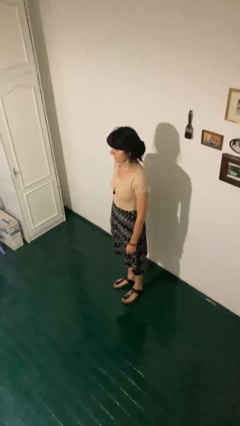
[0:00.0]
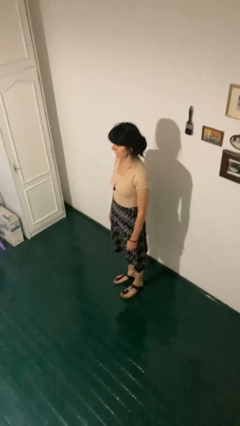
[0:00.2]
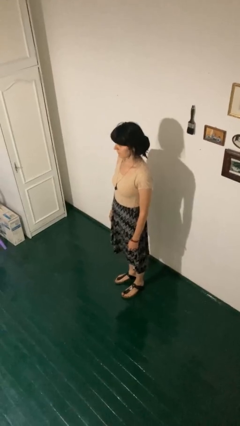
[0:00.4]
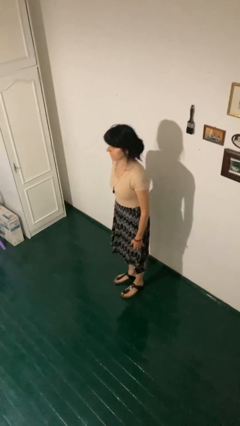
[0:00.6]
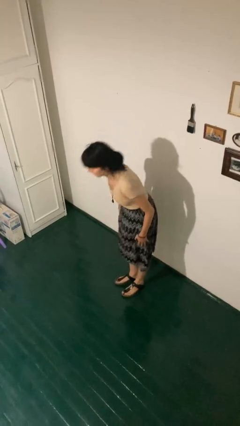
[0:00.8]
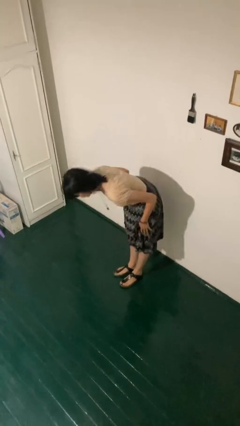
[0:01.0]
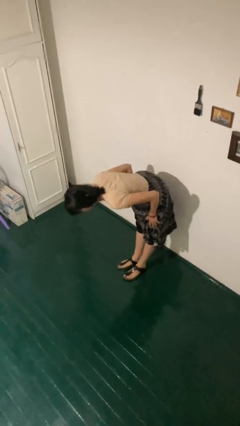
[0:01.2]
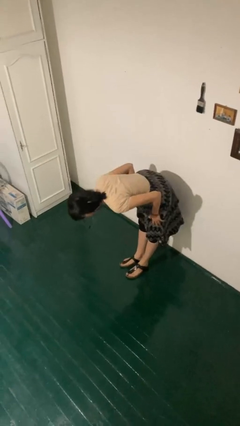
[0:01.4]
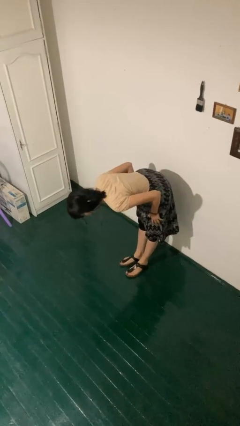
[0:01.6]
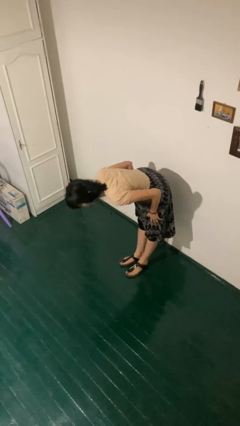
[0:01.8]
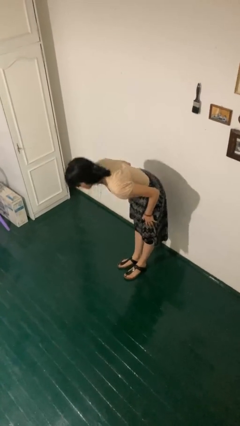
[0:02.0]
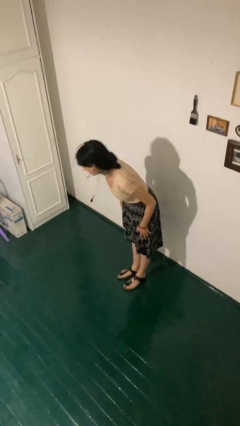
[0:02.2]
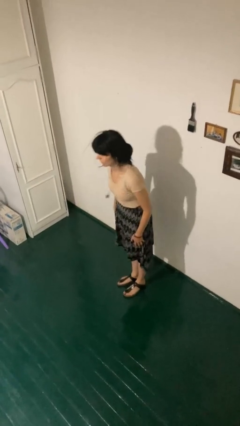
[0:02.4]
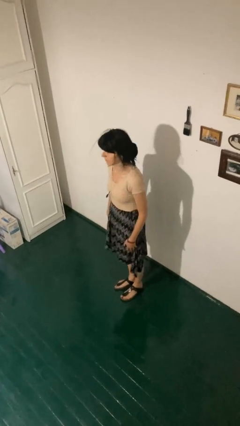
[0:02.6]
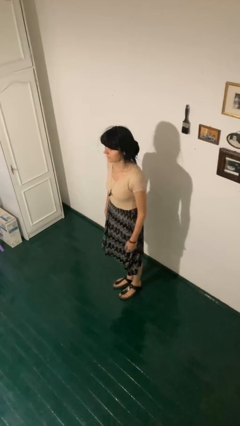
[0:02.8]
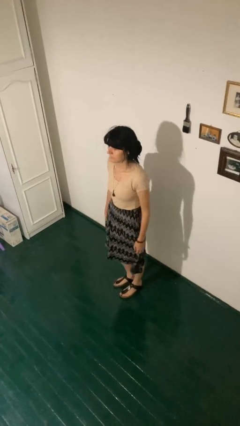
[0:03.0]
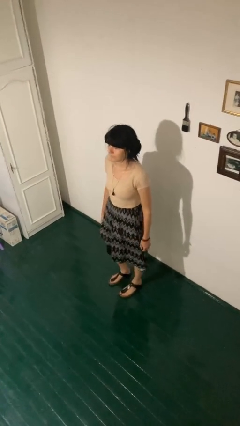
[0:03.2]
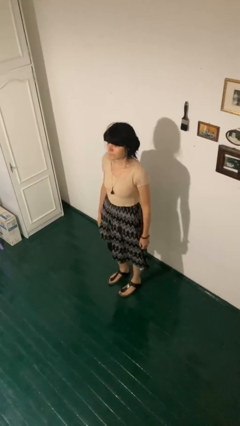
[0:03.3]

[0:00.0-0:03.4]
person bows

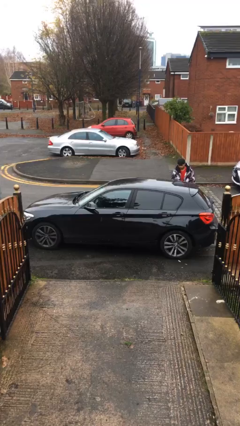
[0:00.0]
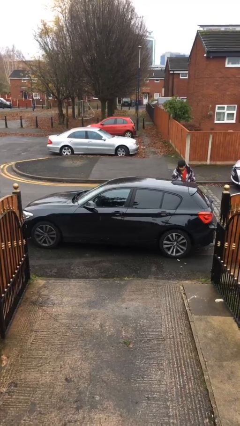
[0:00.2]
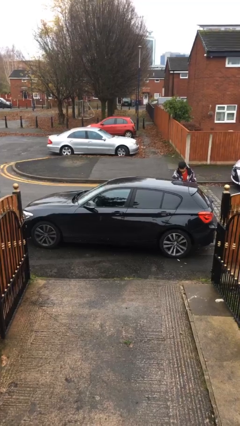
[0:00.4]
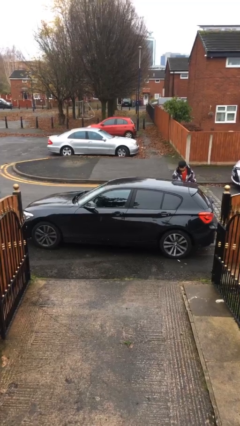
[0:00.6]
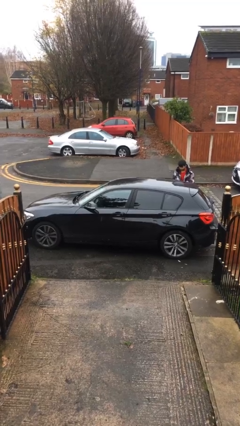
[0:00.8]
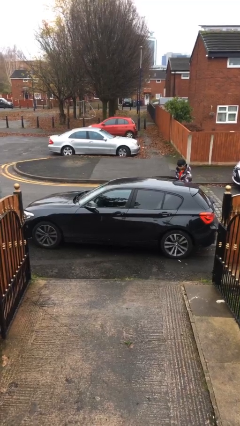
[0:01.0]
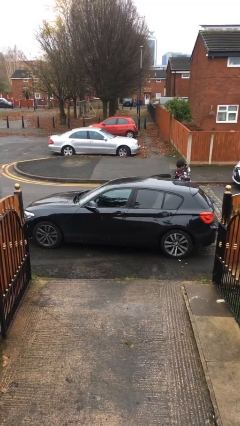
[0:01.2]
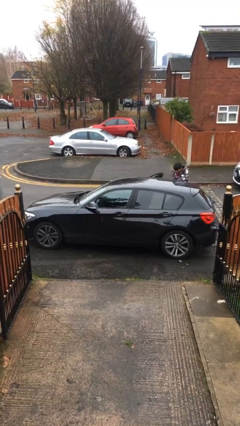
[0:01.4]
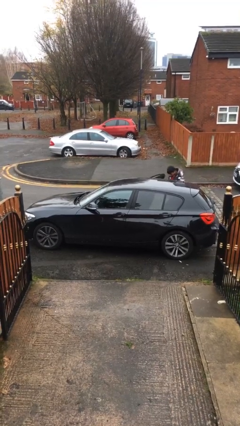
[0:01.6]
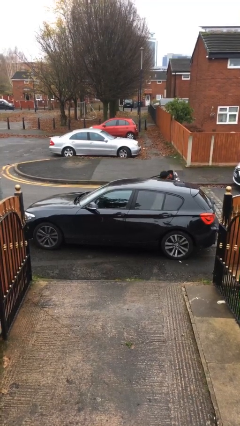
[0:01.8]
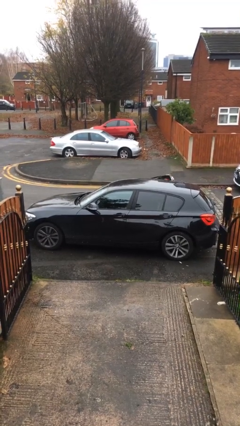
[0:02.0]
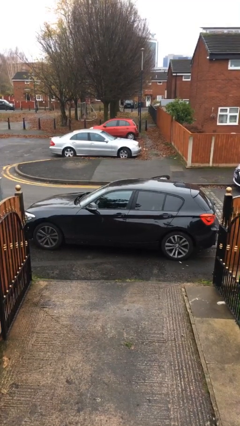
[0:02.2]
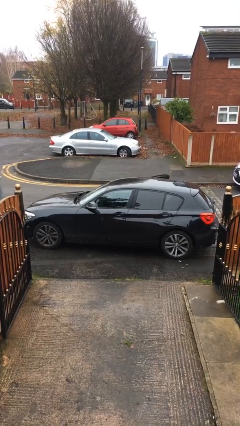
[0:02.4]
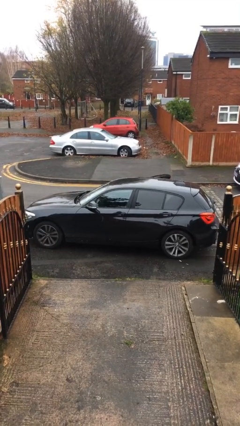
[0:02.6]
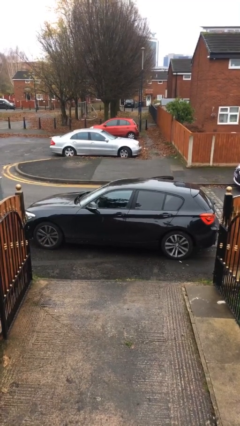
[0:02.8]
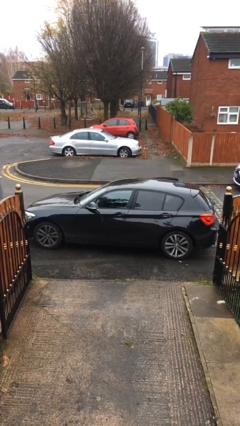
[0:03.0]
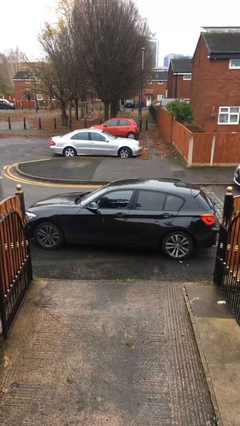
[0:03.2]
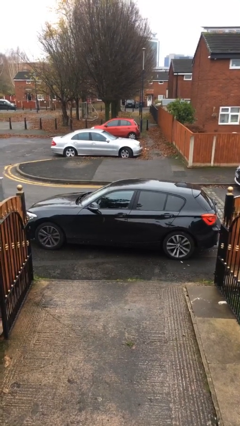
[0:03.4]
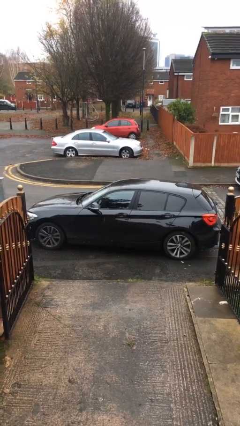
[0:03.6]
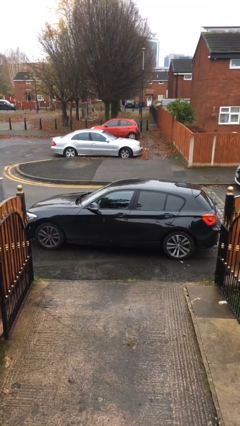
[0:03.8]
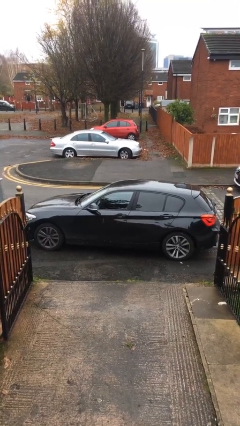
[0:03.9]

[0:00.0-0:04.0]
car picks up person

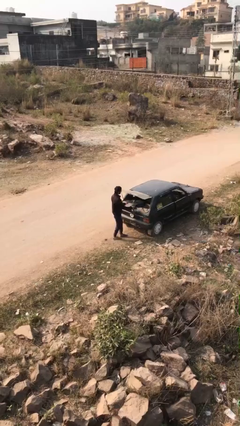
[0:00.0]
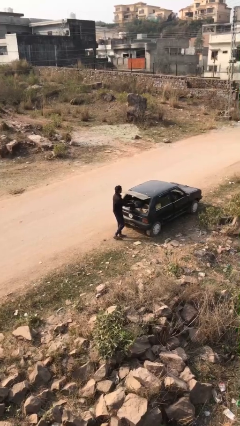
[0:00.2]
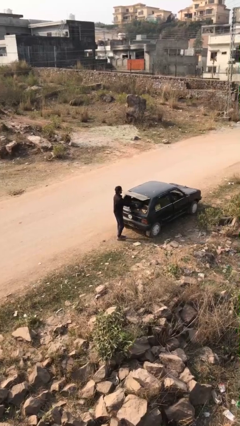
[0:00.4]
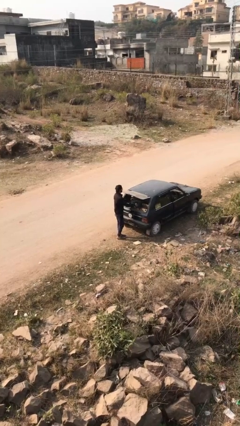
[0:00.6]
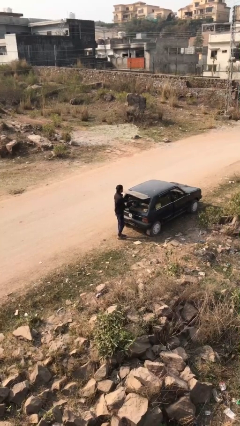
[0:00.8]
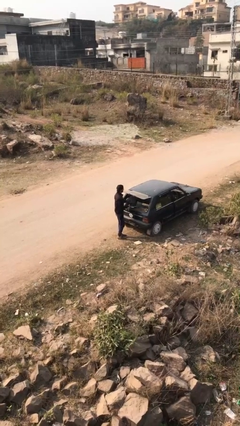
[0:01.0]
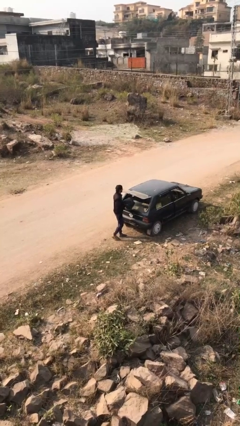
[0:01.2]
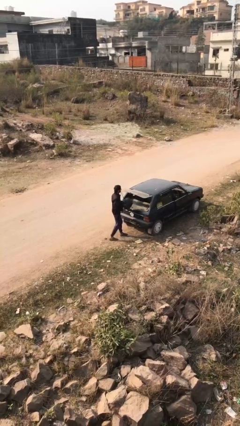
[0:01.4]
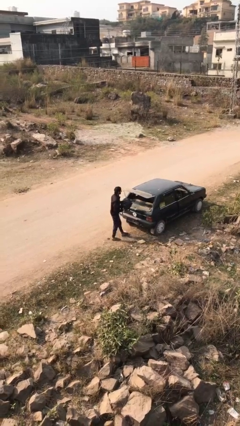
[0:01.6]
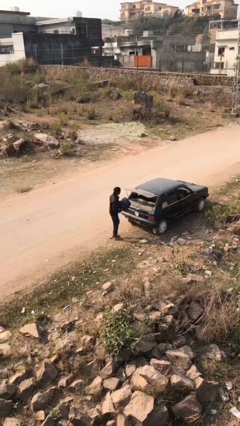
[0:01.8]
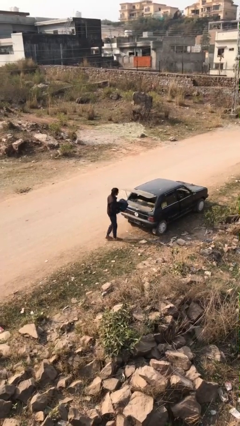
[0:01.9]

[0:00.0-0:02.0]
person unloads car

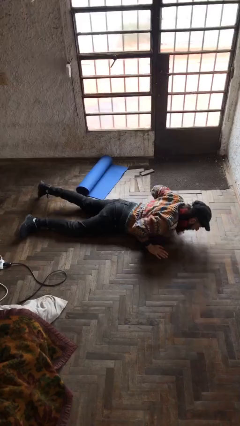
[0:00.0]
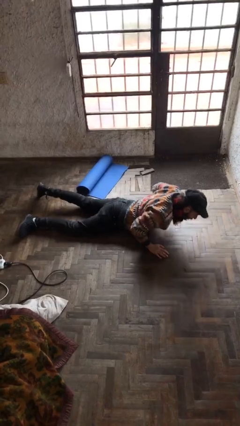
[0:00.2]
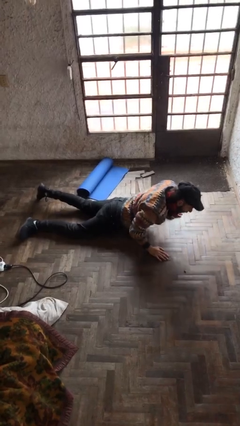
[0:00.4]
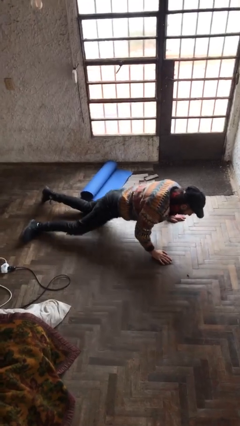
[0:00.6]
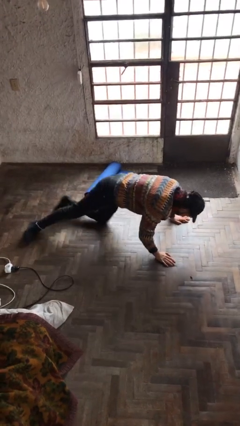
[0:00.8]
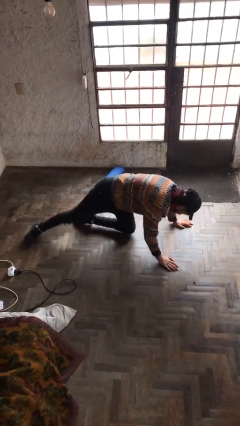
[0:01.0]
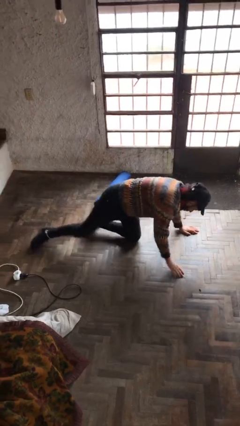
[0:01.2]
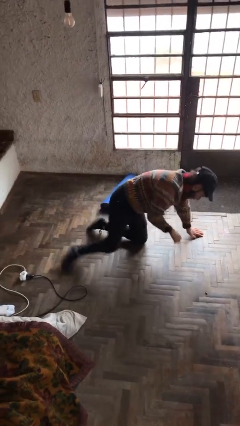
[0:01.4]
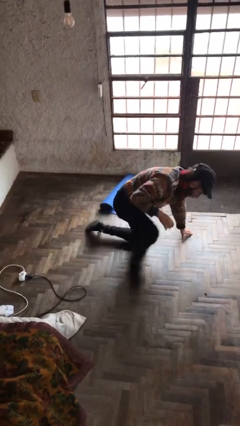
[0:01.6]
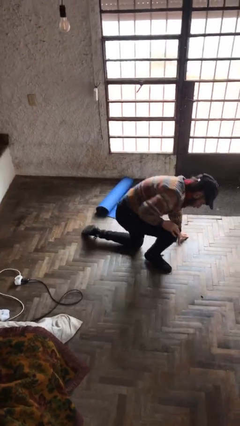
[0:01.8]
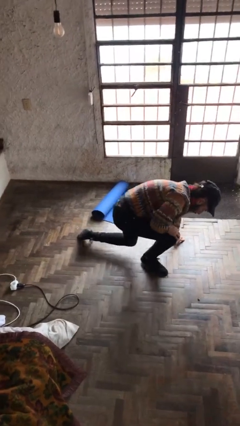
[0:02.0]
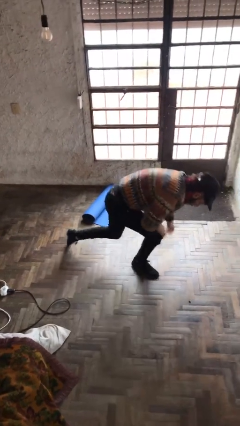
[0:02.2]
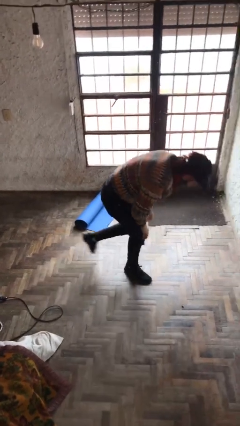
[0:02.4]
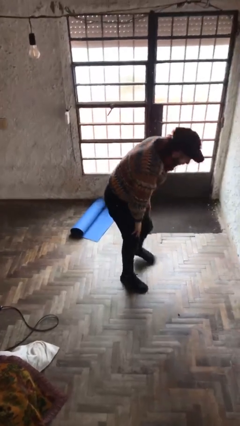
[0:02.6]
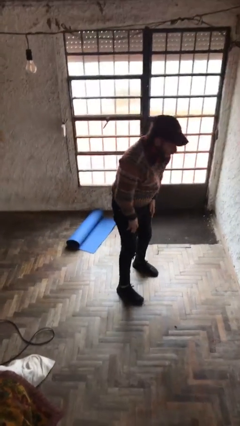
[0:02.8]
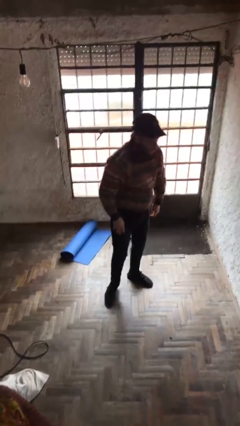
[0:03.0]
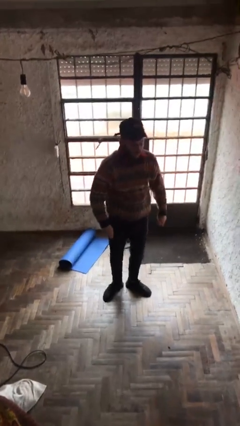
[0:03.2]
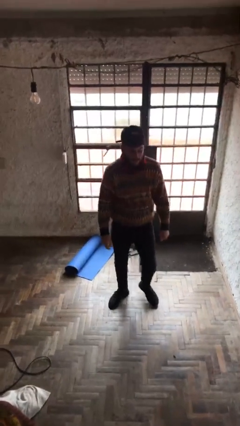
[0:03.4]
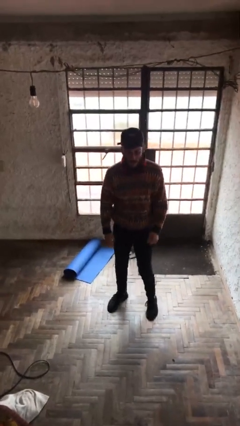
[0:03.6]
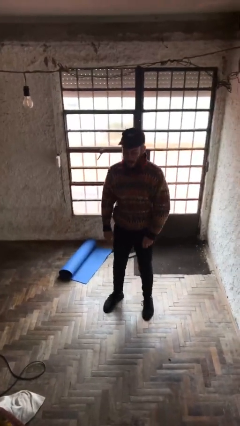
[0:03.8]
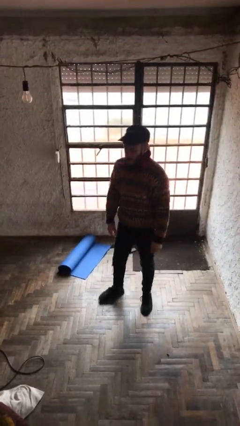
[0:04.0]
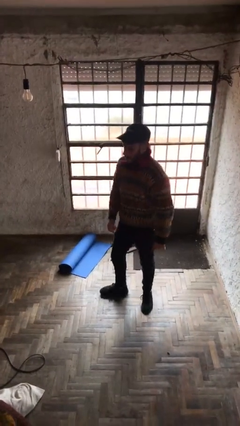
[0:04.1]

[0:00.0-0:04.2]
person stands up from floor

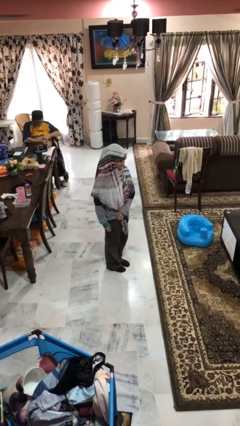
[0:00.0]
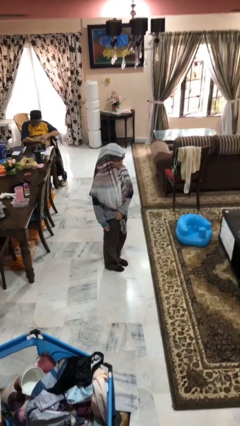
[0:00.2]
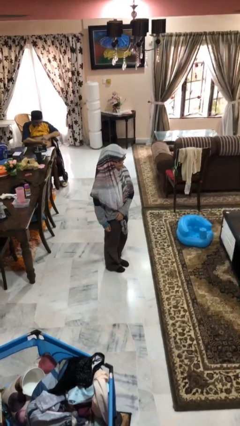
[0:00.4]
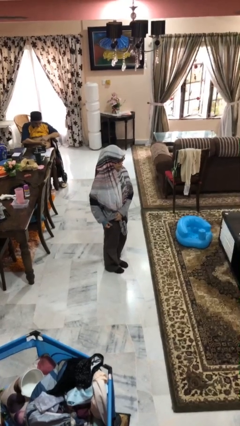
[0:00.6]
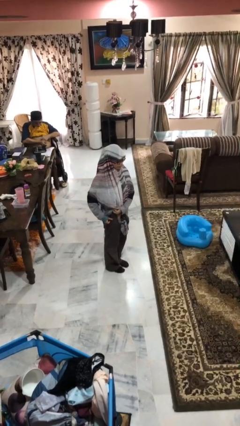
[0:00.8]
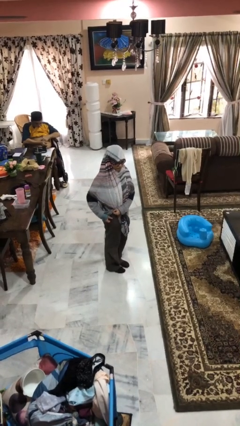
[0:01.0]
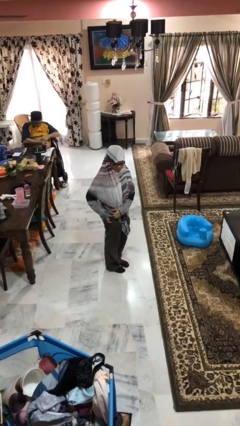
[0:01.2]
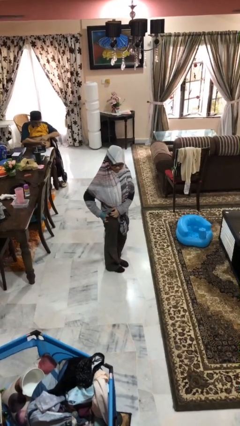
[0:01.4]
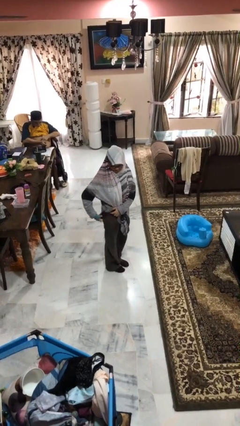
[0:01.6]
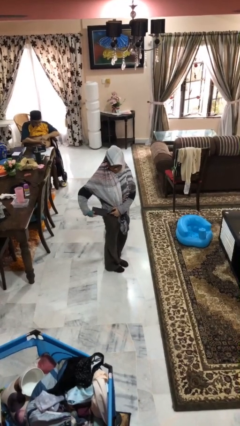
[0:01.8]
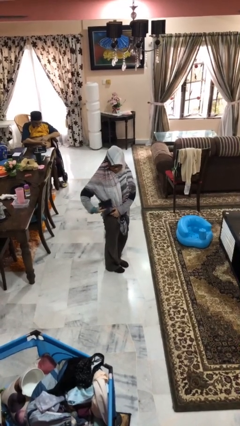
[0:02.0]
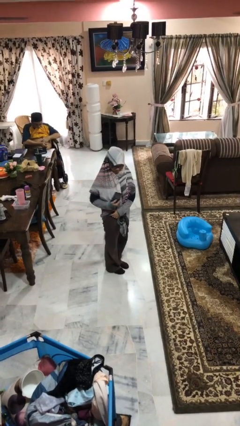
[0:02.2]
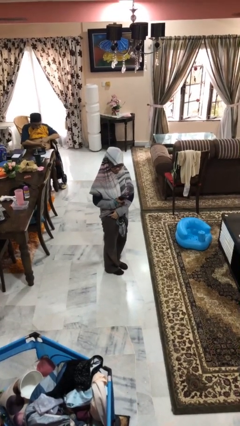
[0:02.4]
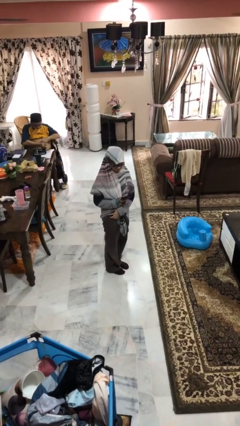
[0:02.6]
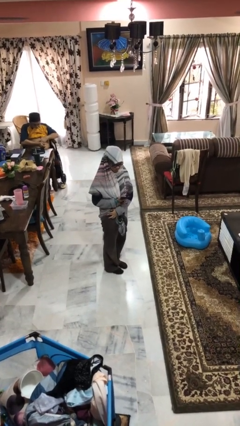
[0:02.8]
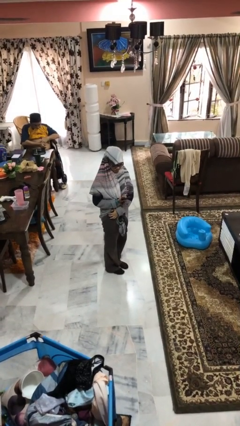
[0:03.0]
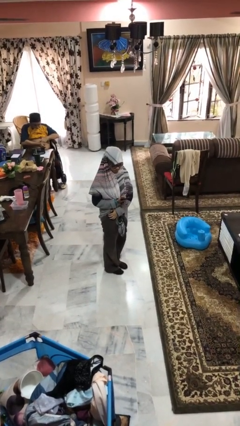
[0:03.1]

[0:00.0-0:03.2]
person takes phone from pocket

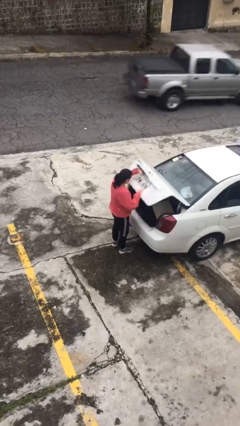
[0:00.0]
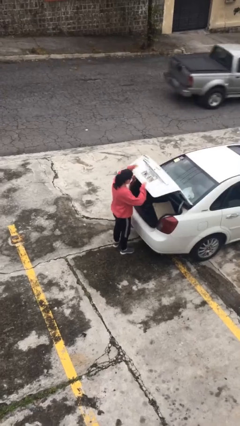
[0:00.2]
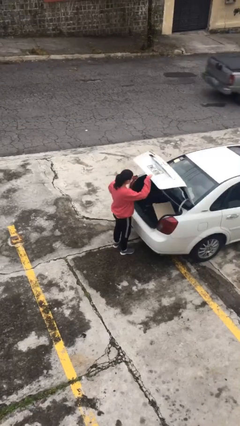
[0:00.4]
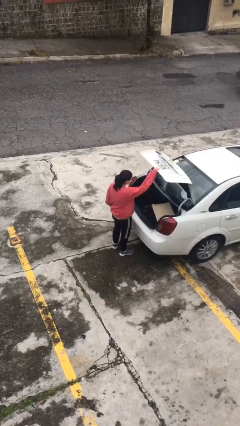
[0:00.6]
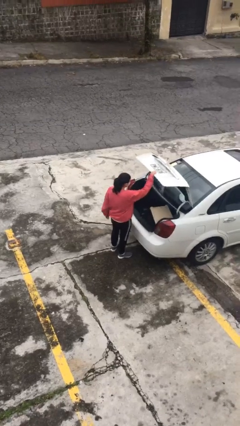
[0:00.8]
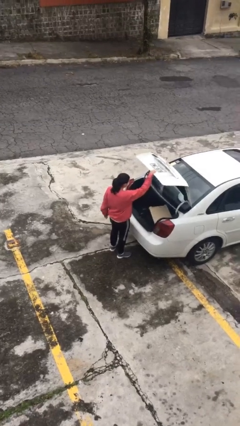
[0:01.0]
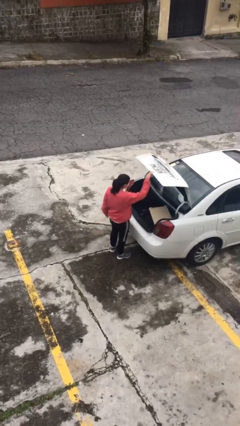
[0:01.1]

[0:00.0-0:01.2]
person opens car trunk
